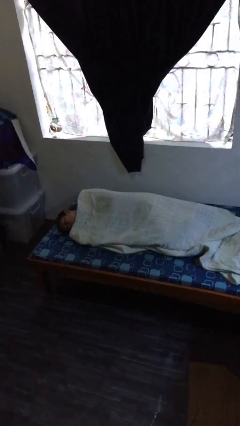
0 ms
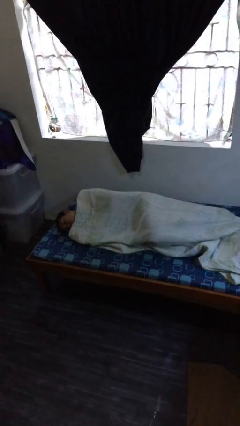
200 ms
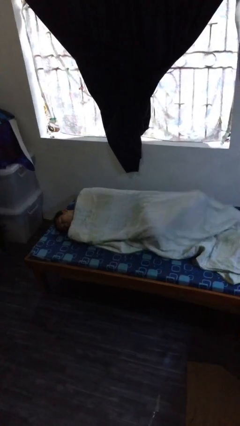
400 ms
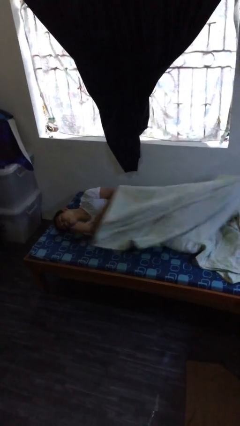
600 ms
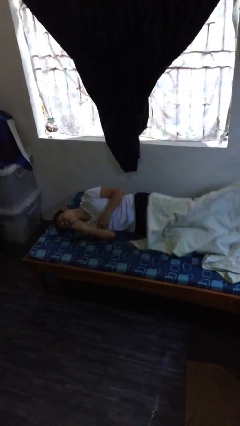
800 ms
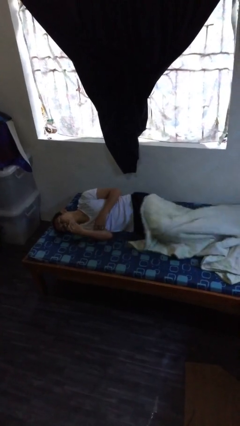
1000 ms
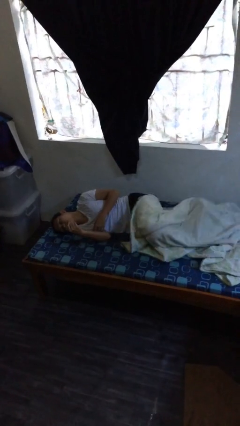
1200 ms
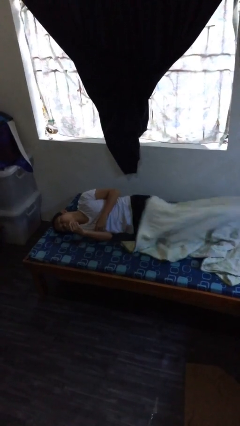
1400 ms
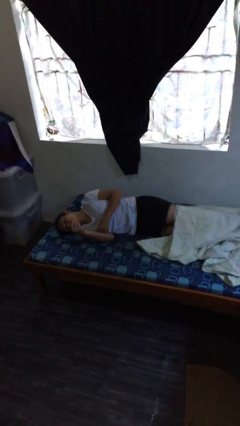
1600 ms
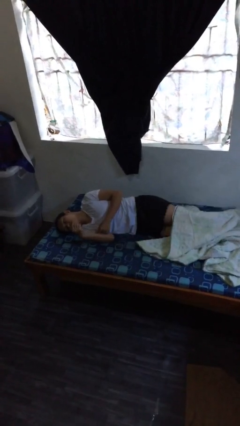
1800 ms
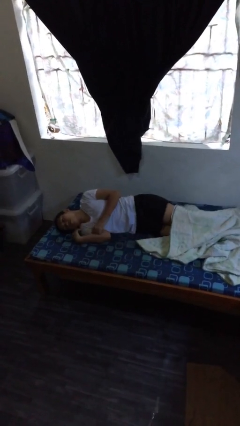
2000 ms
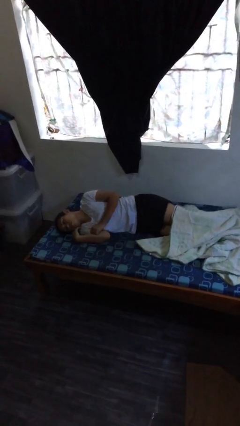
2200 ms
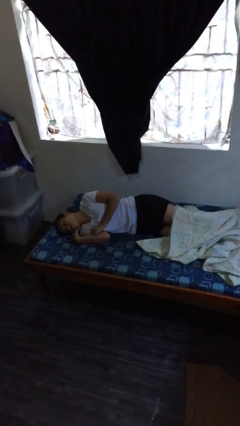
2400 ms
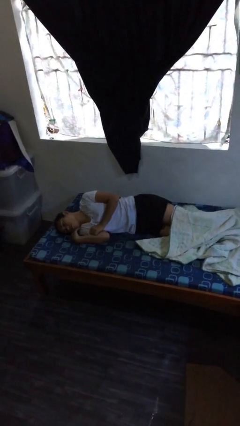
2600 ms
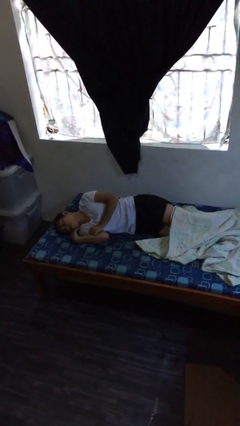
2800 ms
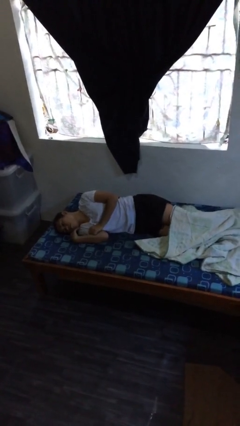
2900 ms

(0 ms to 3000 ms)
person uncovers with bedsheets

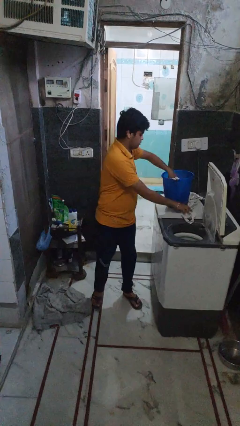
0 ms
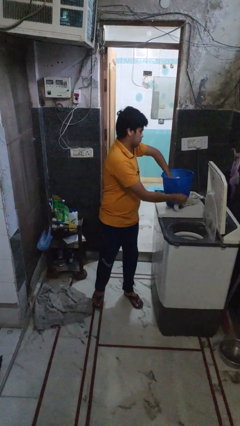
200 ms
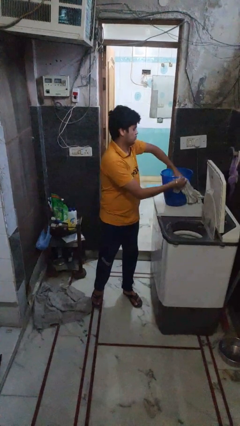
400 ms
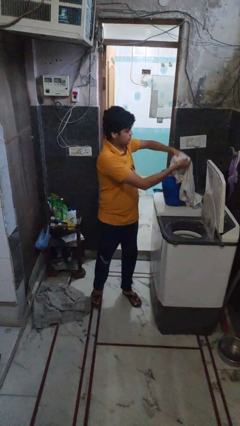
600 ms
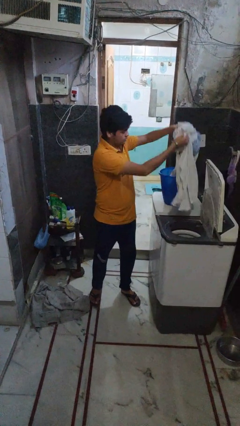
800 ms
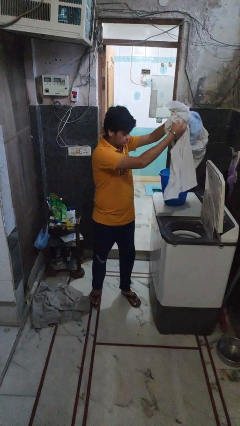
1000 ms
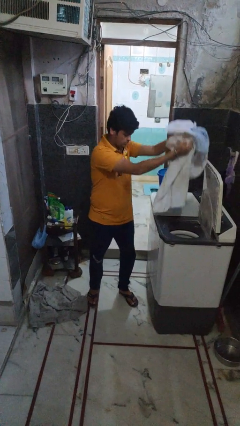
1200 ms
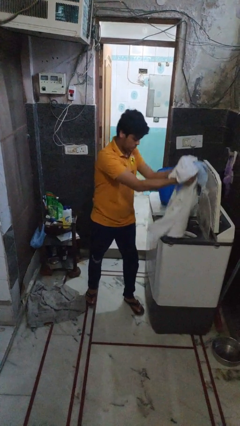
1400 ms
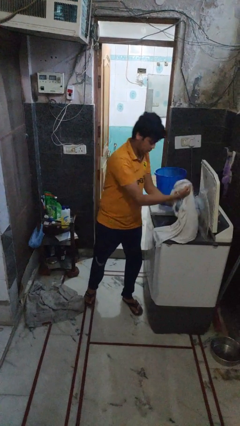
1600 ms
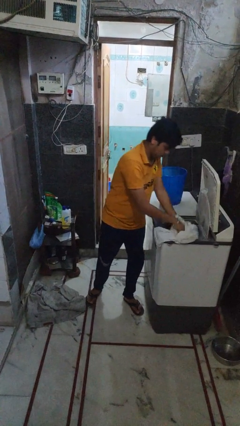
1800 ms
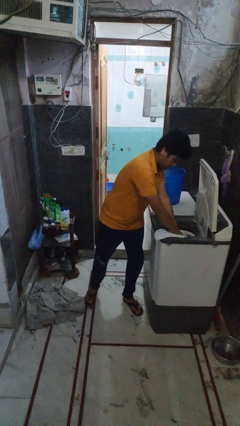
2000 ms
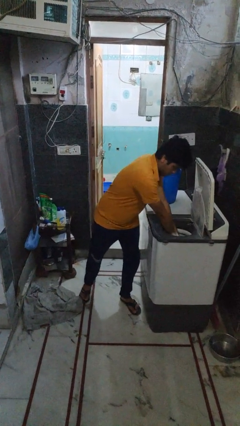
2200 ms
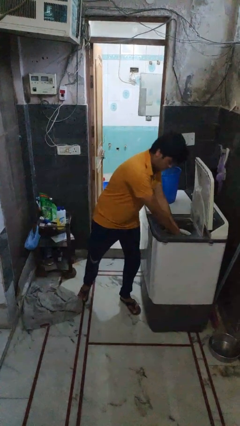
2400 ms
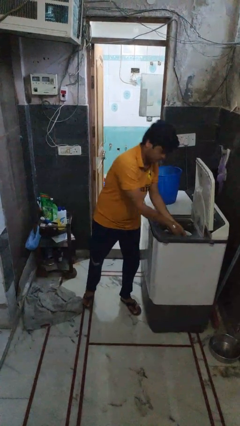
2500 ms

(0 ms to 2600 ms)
person loads clotheswasher

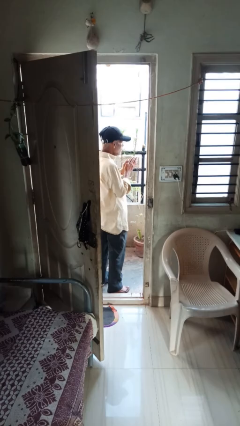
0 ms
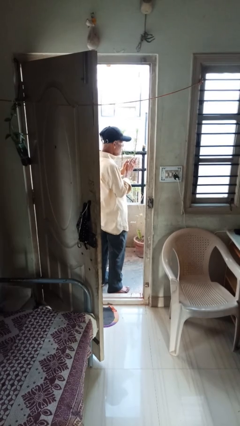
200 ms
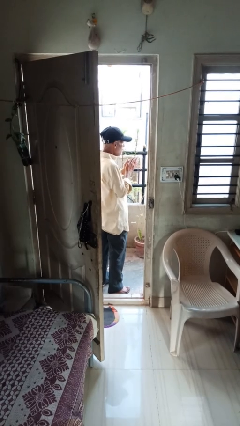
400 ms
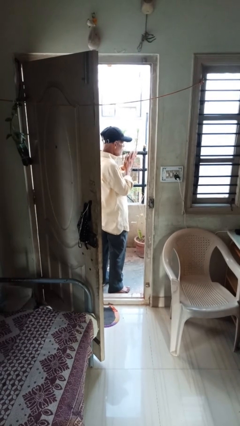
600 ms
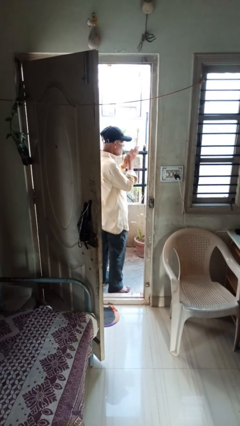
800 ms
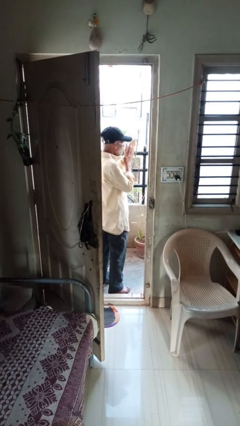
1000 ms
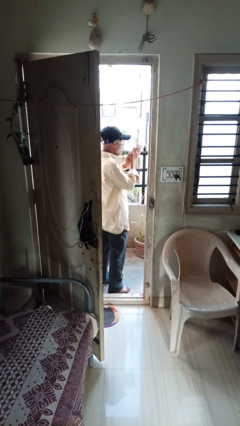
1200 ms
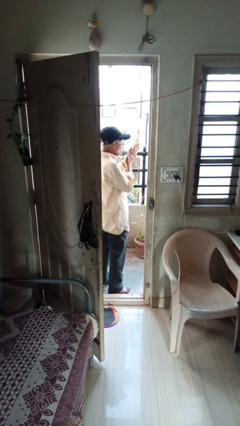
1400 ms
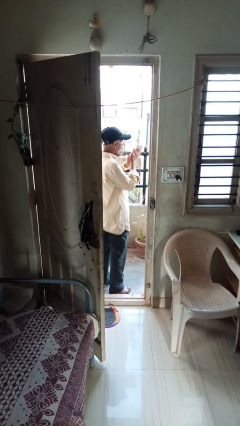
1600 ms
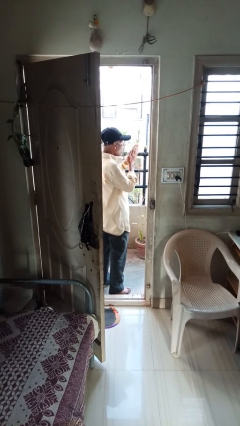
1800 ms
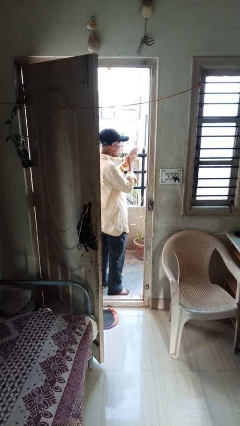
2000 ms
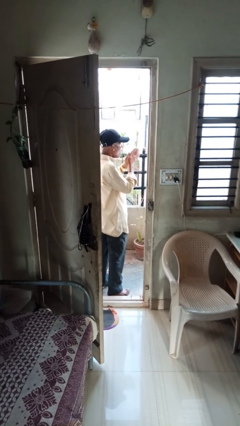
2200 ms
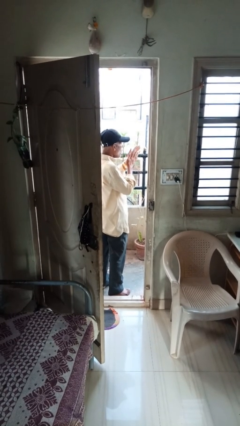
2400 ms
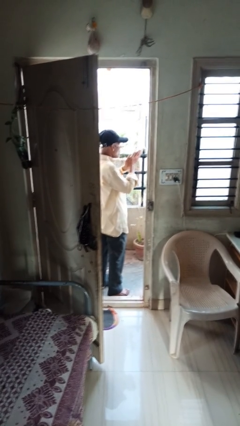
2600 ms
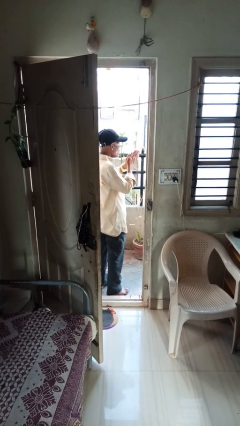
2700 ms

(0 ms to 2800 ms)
person blows into hands

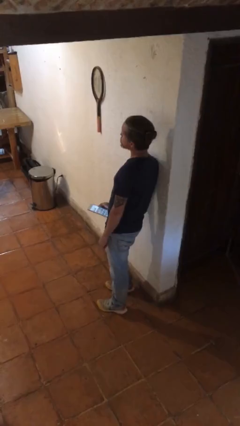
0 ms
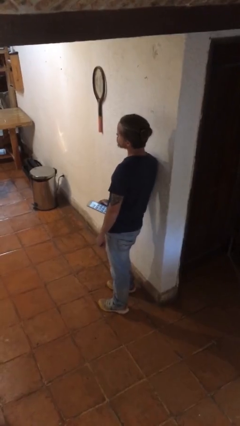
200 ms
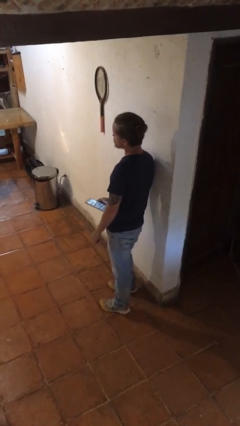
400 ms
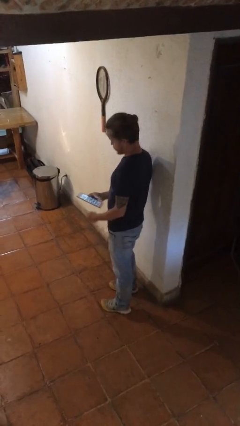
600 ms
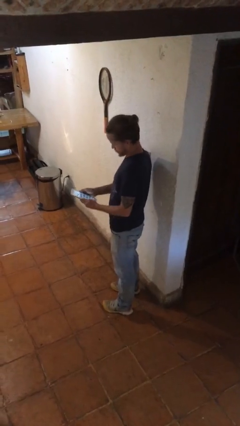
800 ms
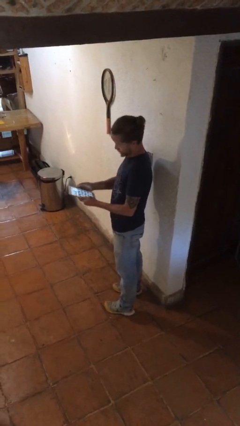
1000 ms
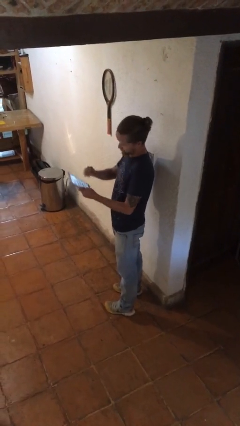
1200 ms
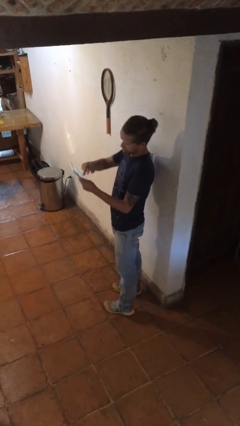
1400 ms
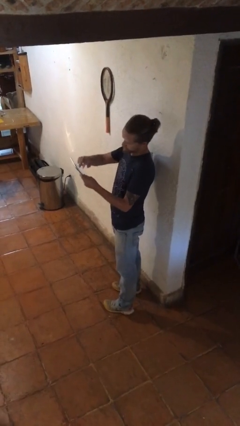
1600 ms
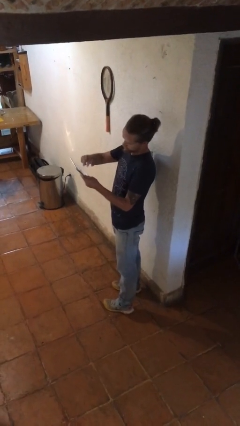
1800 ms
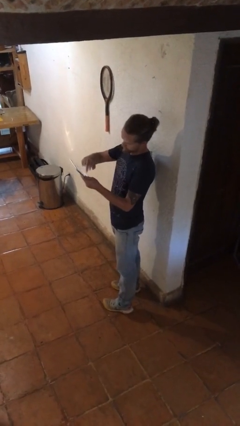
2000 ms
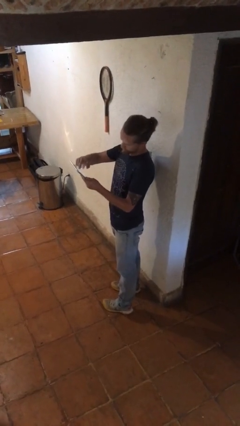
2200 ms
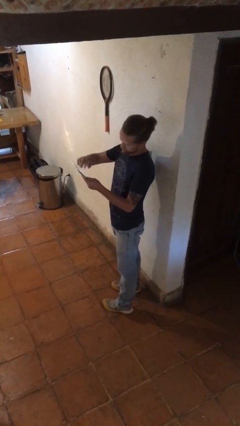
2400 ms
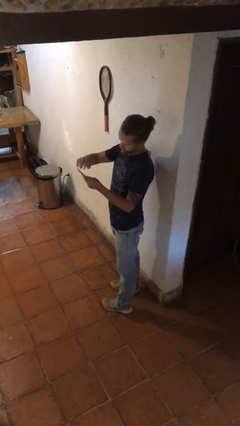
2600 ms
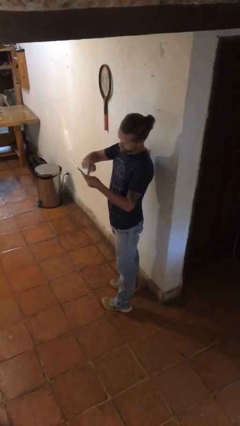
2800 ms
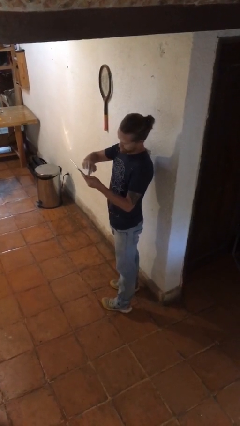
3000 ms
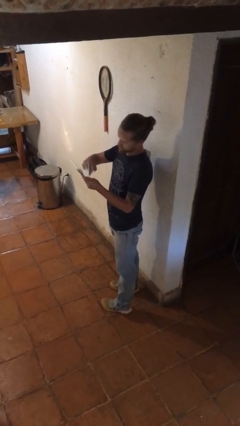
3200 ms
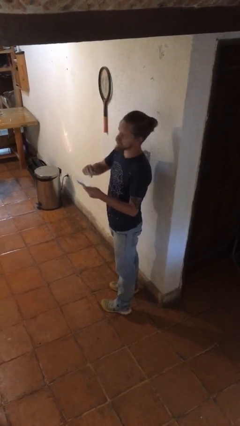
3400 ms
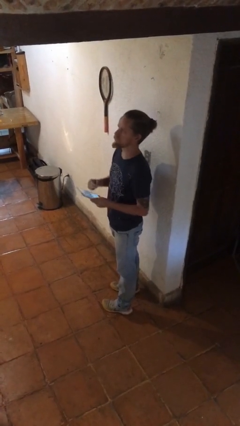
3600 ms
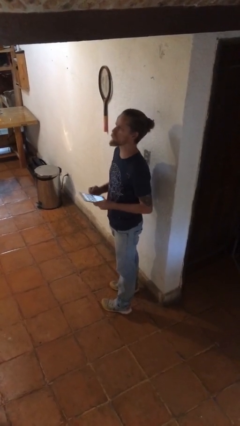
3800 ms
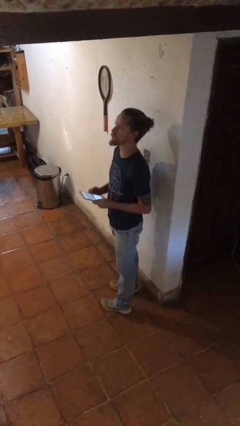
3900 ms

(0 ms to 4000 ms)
person interacts with tablet

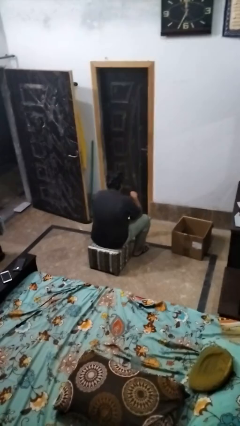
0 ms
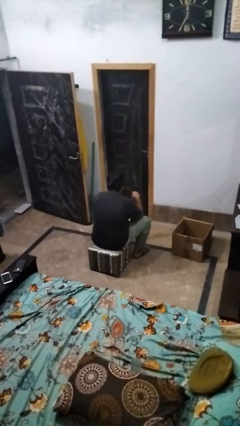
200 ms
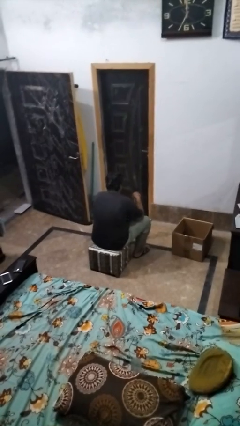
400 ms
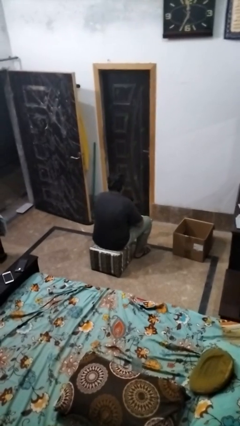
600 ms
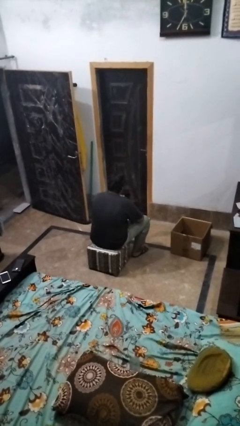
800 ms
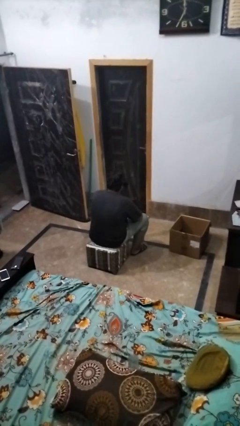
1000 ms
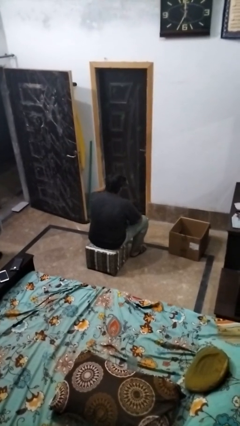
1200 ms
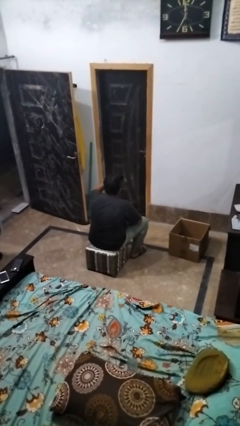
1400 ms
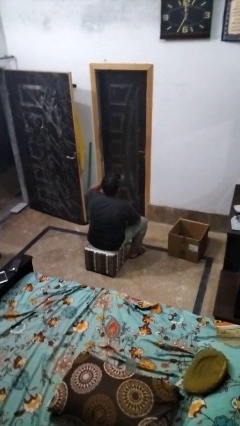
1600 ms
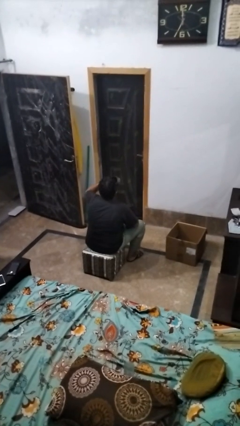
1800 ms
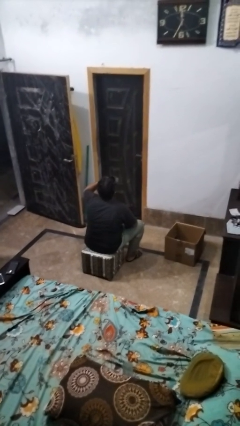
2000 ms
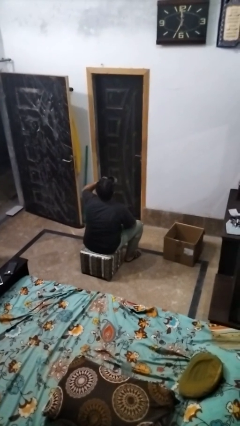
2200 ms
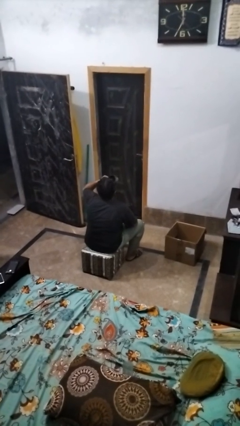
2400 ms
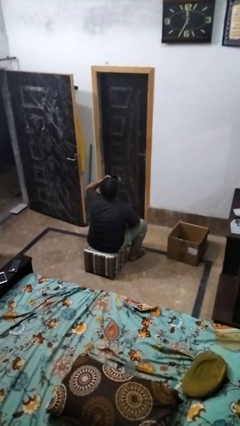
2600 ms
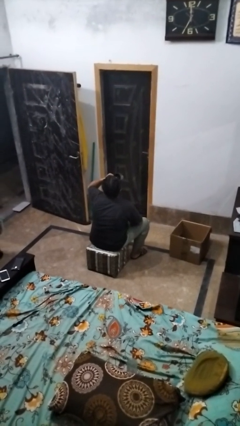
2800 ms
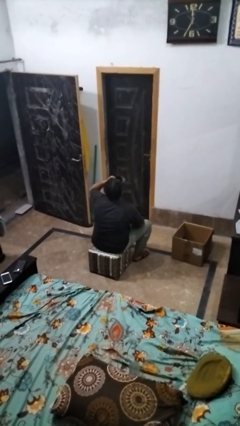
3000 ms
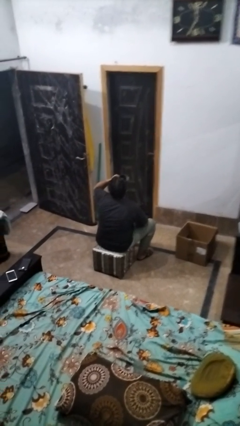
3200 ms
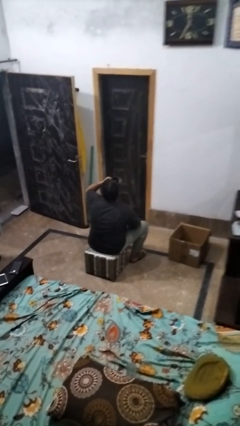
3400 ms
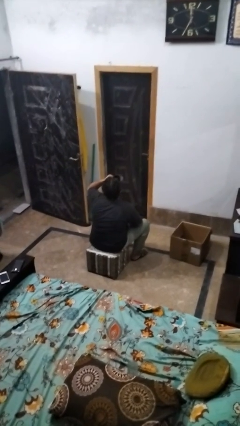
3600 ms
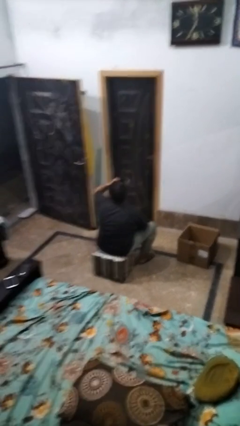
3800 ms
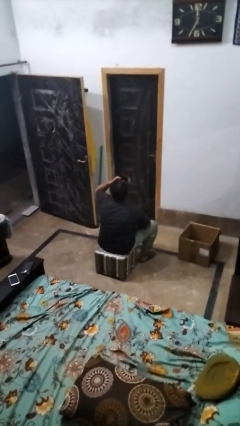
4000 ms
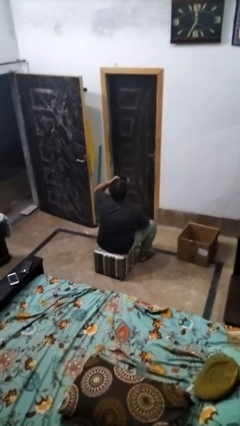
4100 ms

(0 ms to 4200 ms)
person drinks from mug

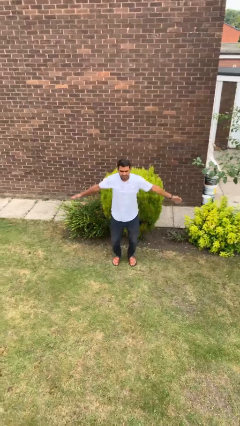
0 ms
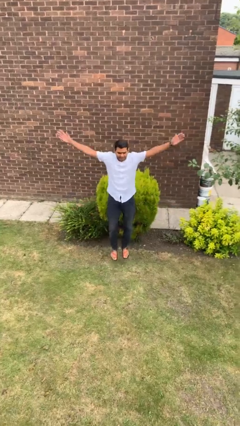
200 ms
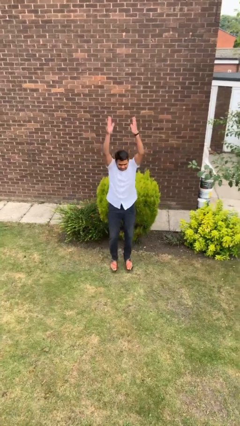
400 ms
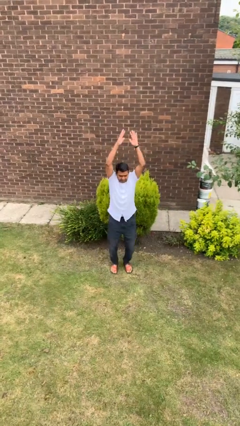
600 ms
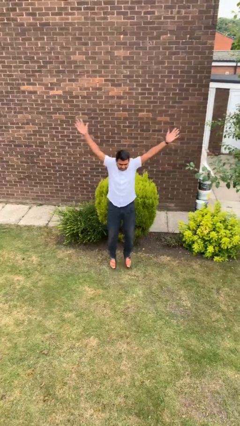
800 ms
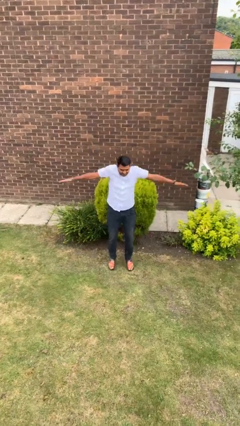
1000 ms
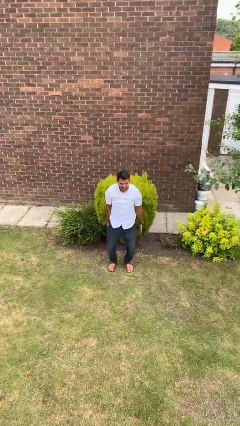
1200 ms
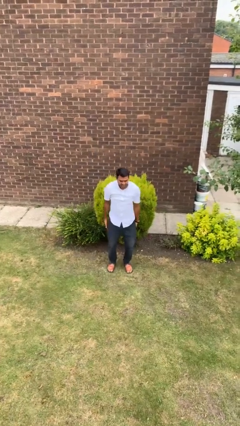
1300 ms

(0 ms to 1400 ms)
person exercises with jumping jacks
